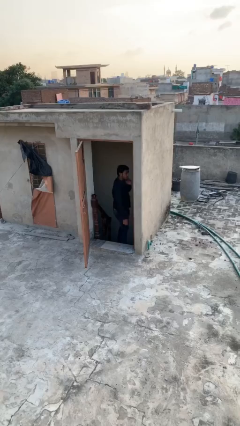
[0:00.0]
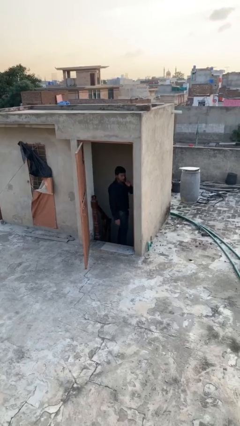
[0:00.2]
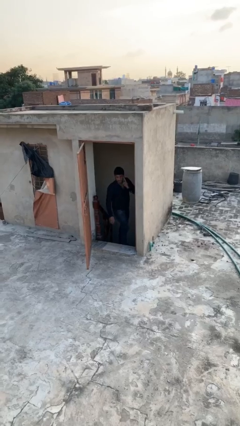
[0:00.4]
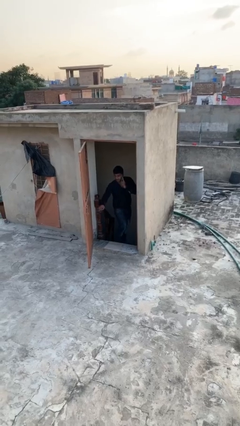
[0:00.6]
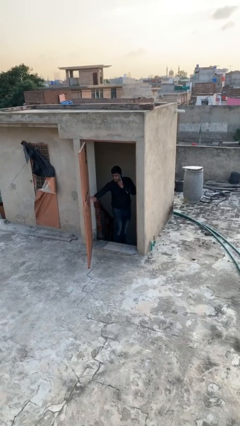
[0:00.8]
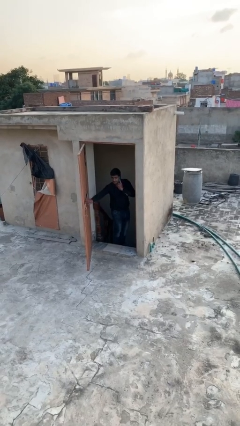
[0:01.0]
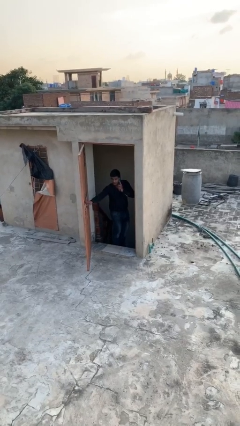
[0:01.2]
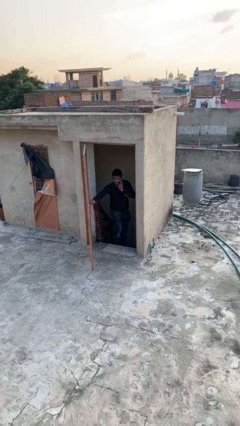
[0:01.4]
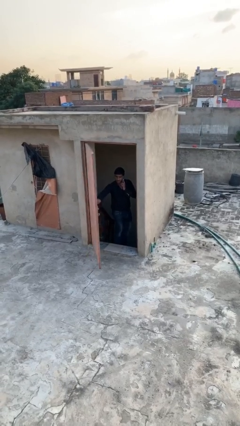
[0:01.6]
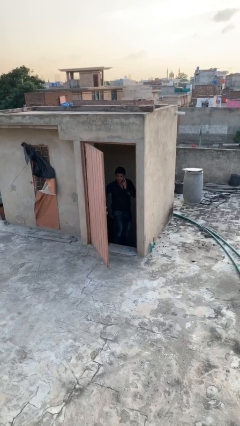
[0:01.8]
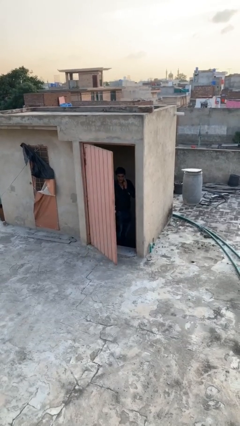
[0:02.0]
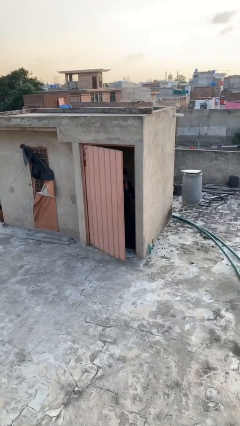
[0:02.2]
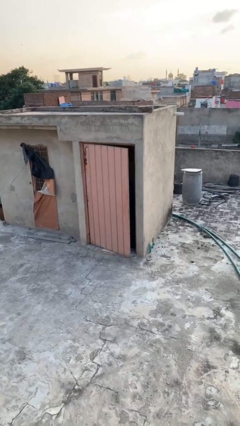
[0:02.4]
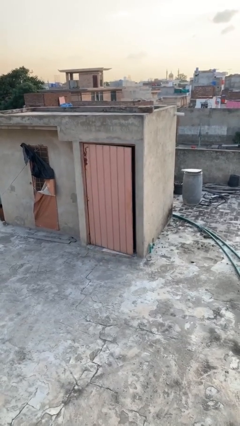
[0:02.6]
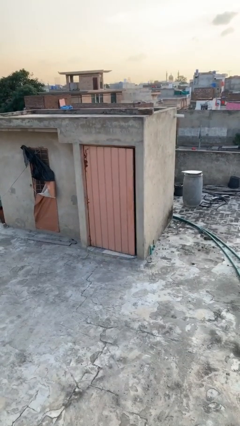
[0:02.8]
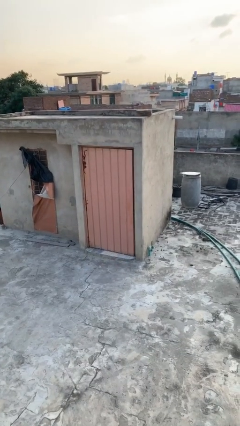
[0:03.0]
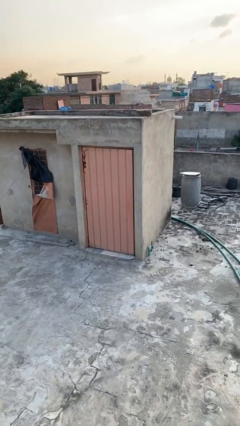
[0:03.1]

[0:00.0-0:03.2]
person closes facility door

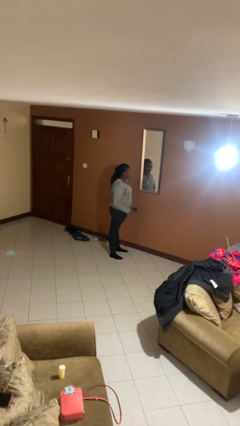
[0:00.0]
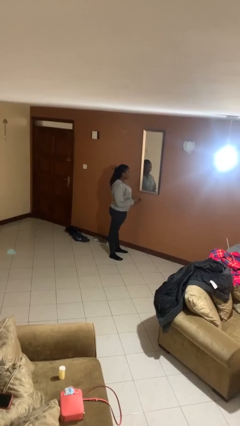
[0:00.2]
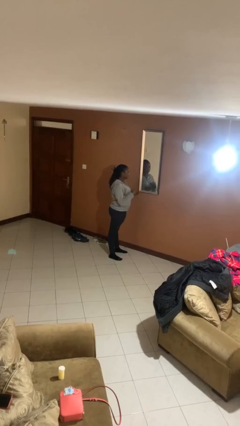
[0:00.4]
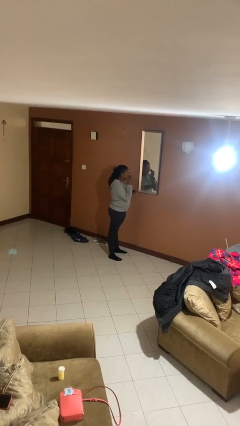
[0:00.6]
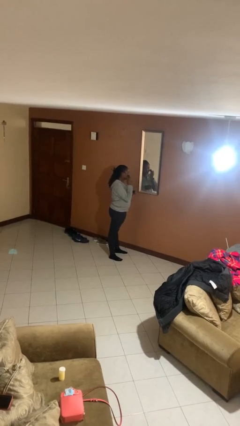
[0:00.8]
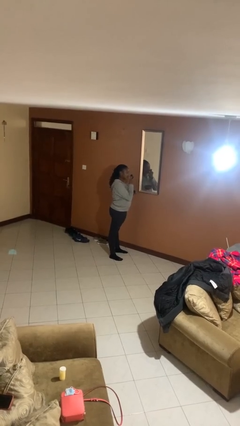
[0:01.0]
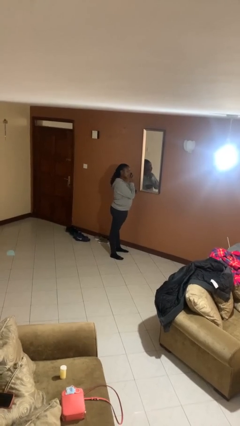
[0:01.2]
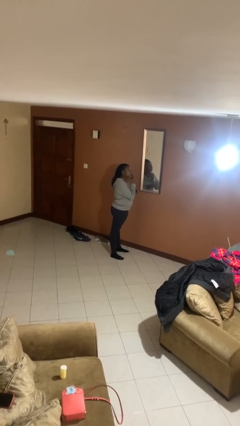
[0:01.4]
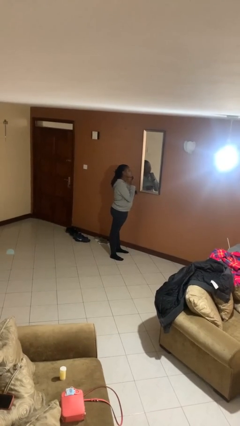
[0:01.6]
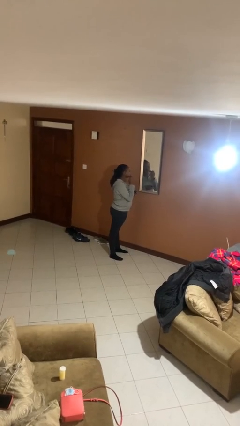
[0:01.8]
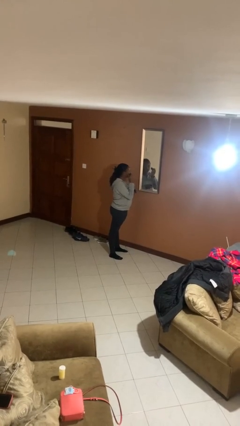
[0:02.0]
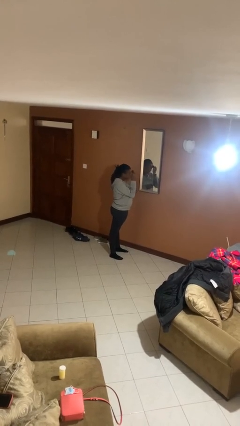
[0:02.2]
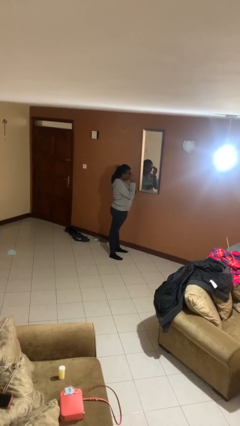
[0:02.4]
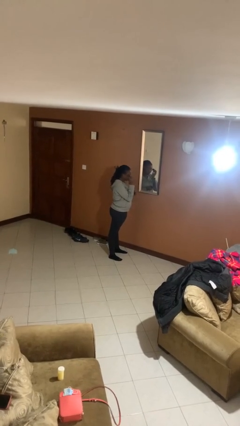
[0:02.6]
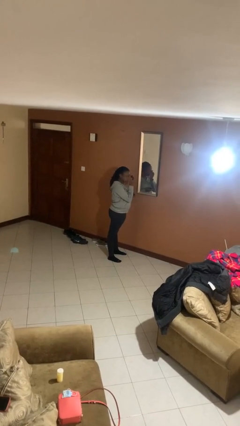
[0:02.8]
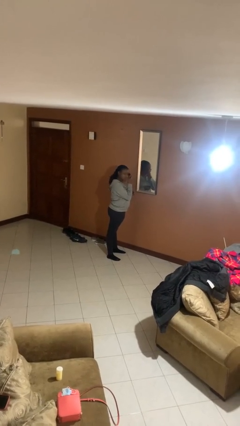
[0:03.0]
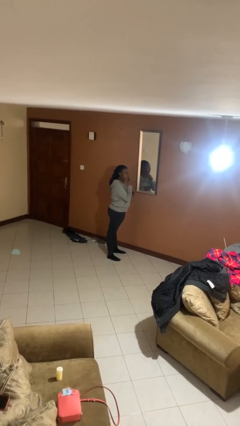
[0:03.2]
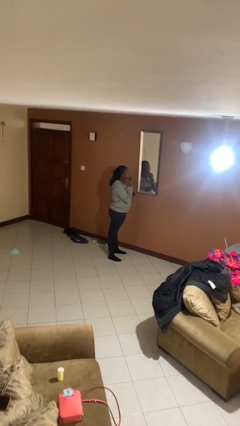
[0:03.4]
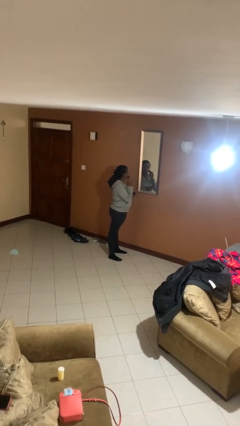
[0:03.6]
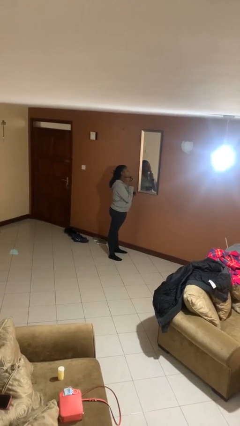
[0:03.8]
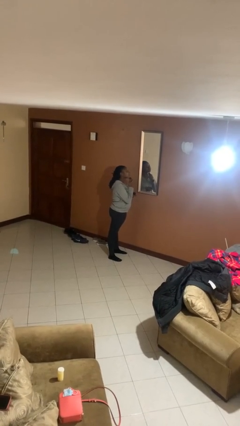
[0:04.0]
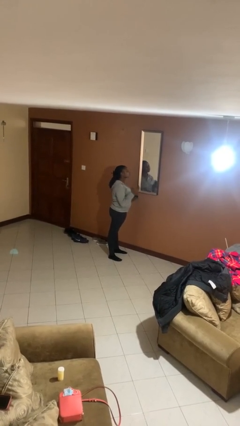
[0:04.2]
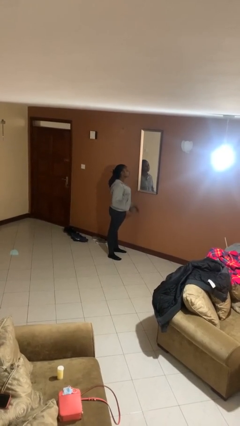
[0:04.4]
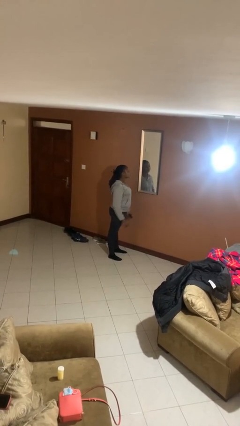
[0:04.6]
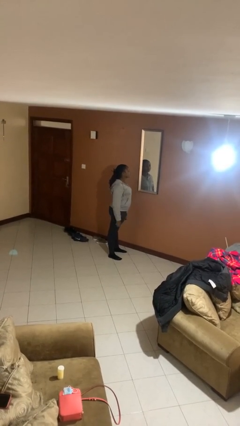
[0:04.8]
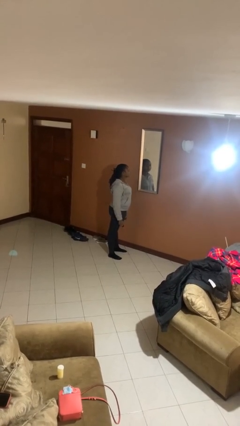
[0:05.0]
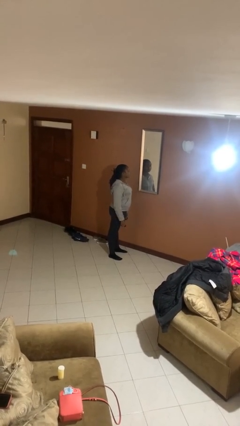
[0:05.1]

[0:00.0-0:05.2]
person applies foundation makeup

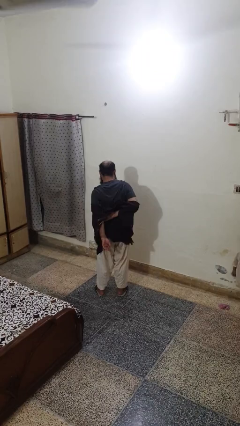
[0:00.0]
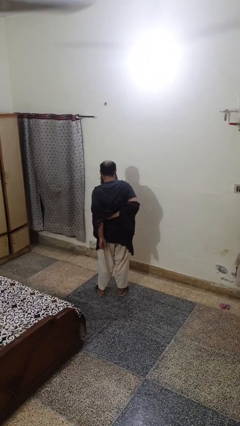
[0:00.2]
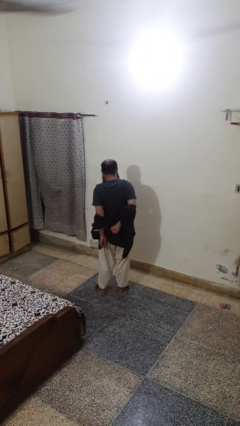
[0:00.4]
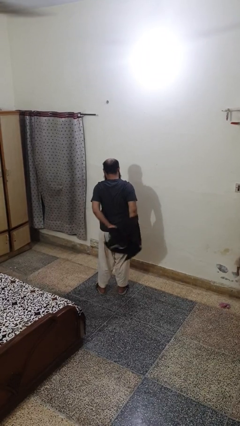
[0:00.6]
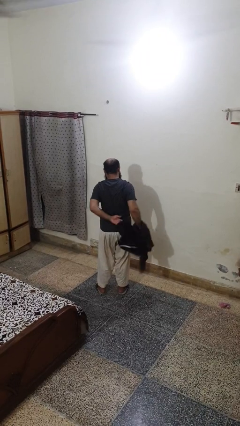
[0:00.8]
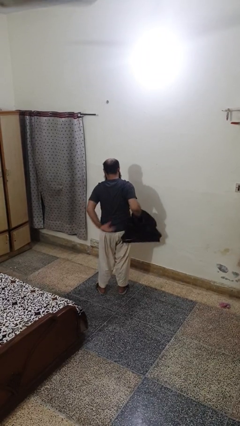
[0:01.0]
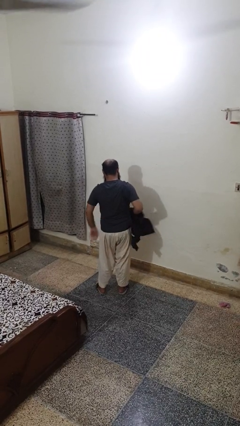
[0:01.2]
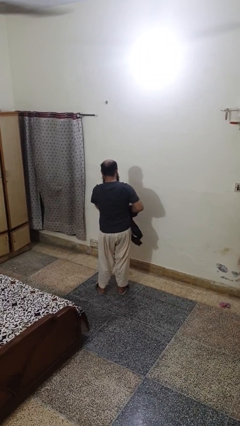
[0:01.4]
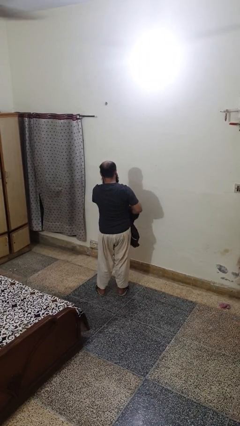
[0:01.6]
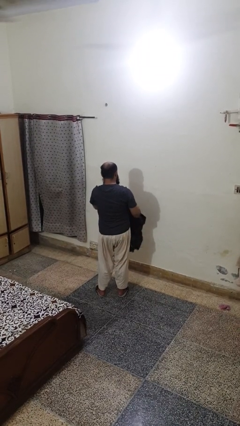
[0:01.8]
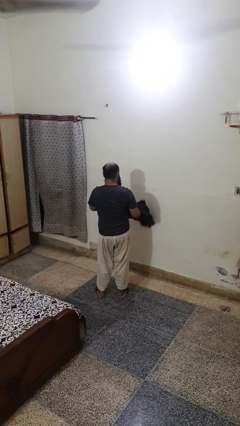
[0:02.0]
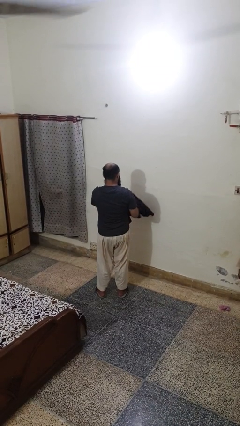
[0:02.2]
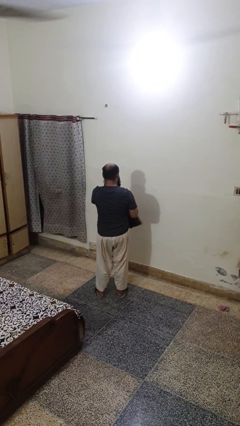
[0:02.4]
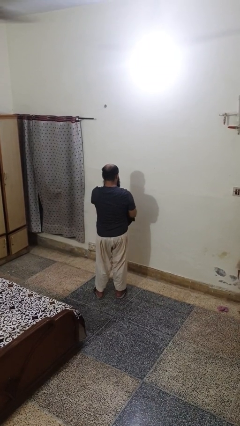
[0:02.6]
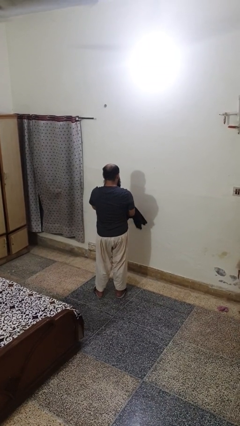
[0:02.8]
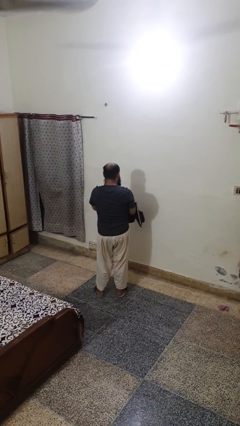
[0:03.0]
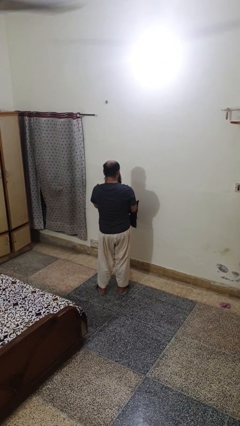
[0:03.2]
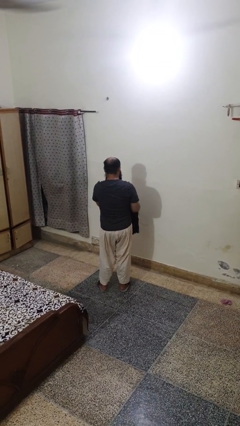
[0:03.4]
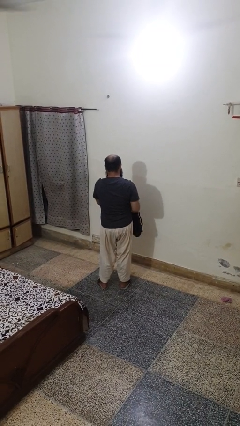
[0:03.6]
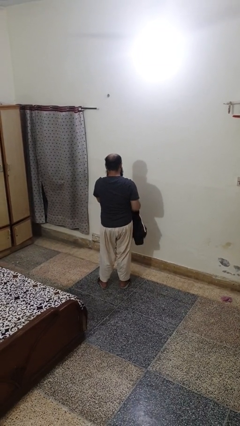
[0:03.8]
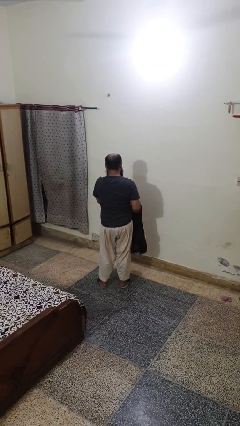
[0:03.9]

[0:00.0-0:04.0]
person takes off shirt

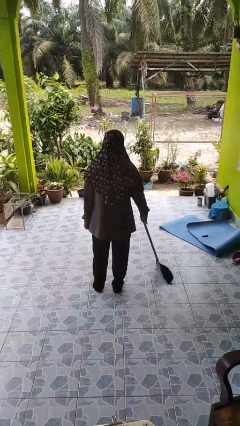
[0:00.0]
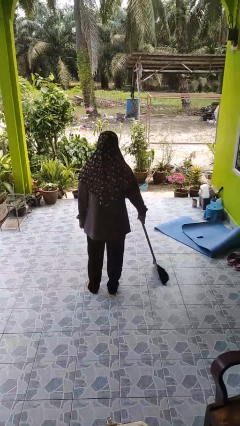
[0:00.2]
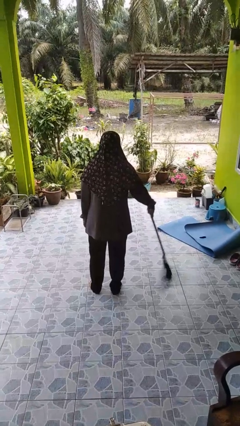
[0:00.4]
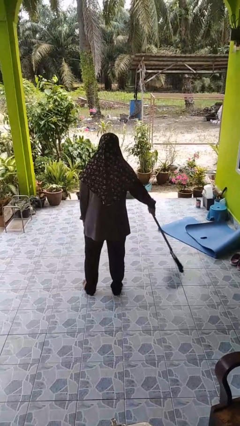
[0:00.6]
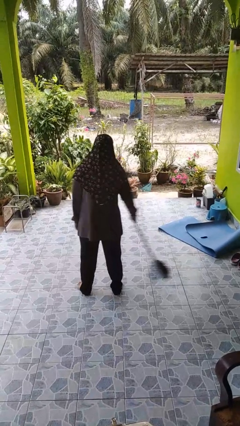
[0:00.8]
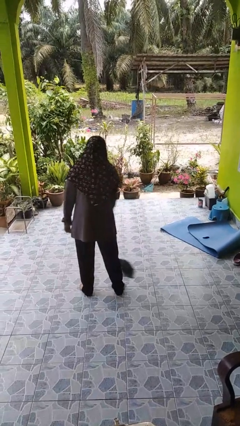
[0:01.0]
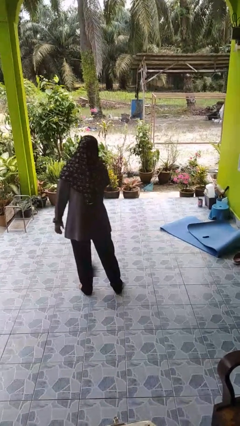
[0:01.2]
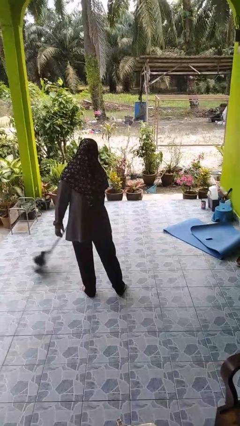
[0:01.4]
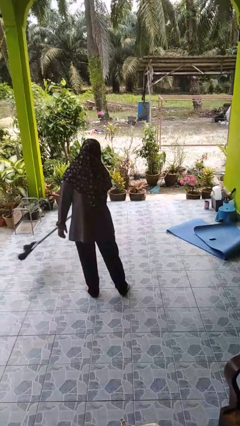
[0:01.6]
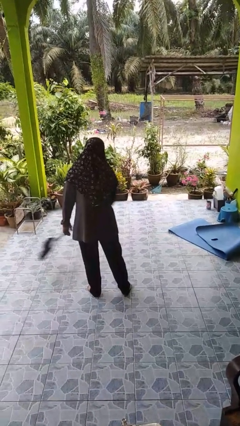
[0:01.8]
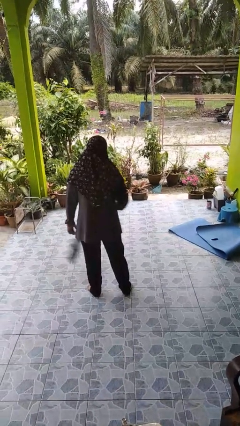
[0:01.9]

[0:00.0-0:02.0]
person sweeps floor

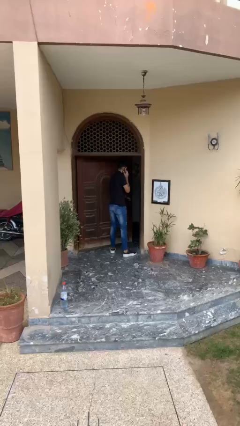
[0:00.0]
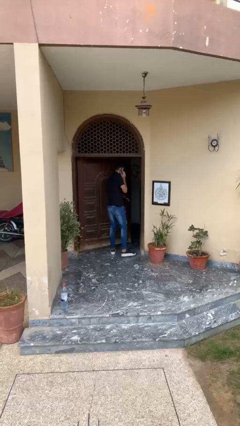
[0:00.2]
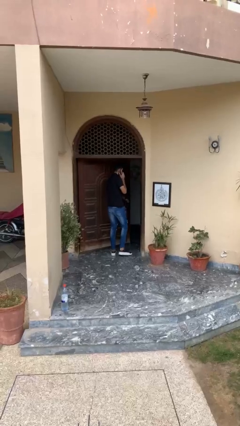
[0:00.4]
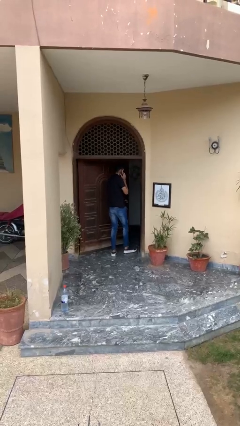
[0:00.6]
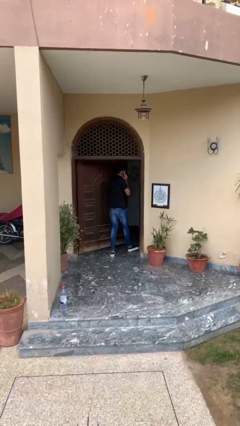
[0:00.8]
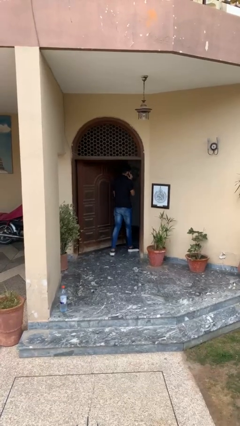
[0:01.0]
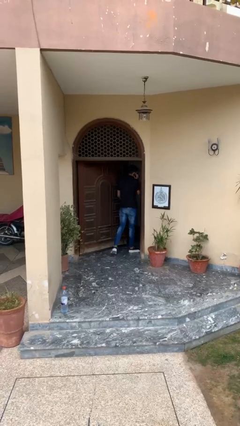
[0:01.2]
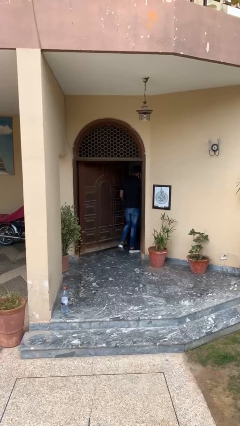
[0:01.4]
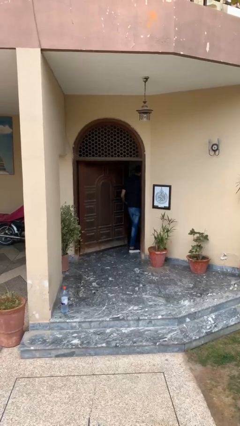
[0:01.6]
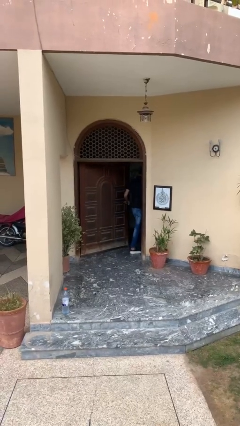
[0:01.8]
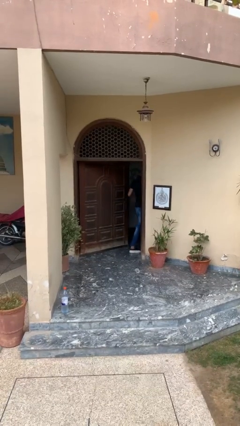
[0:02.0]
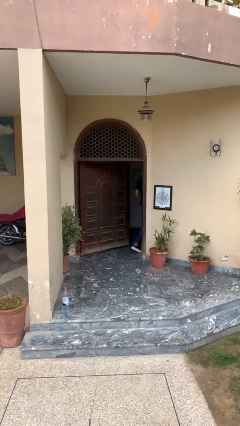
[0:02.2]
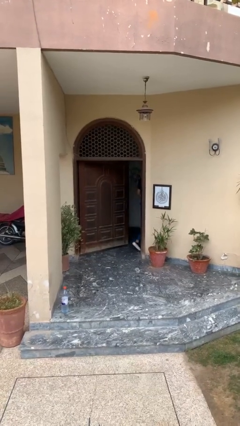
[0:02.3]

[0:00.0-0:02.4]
person exits scene through structure

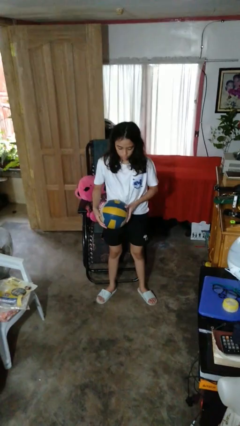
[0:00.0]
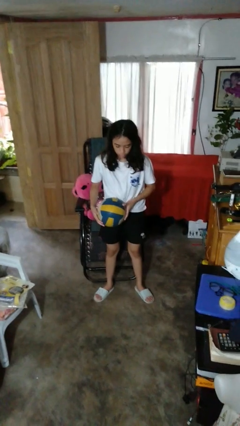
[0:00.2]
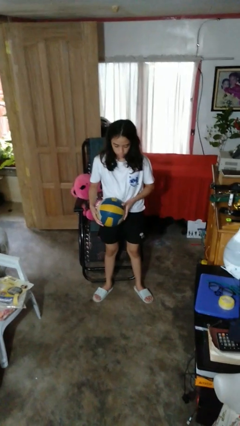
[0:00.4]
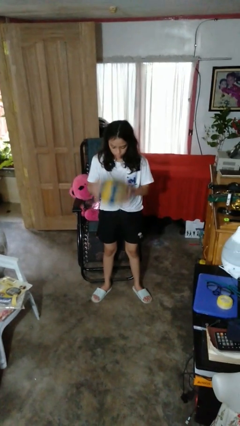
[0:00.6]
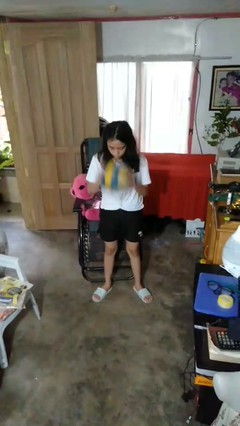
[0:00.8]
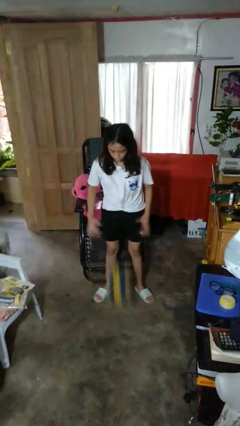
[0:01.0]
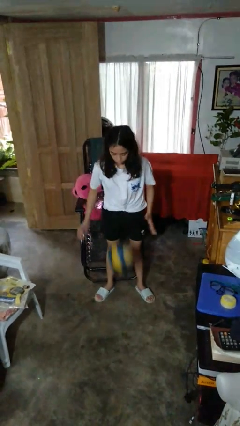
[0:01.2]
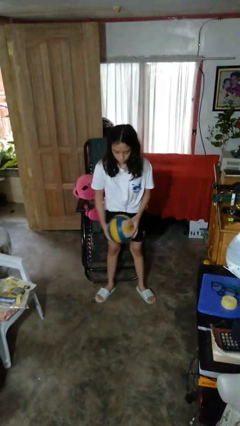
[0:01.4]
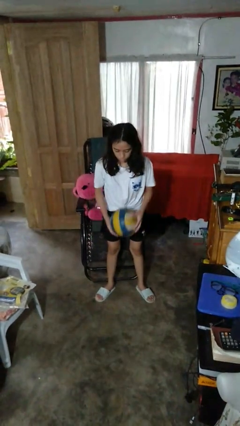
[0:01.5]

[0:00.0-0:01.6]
person bounces ball on floor
